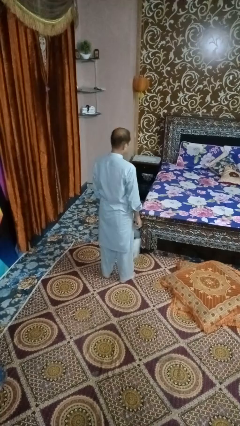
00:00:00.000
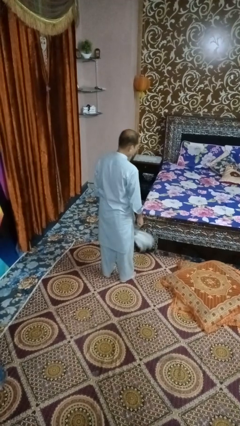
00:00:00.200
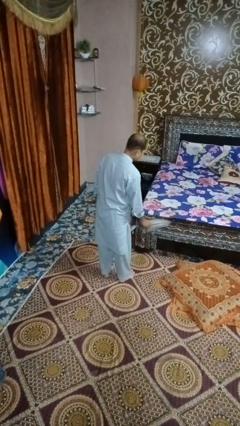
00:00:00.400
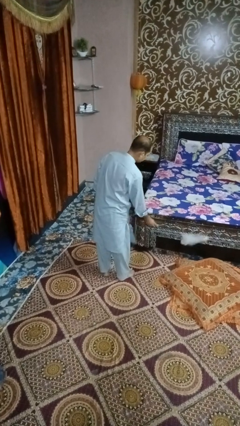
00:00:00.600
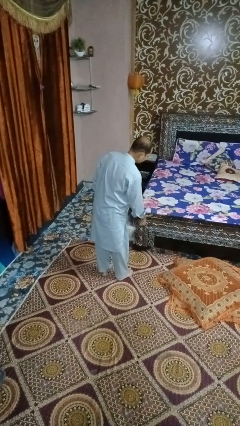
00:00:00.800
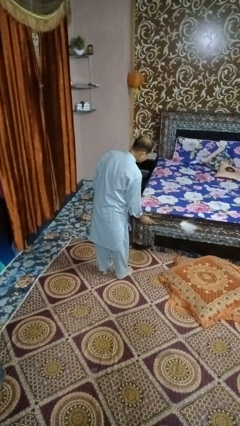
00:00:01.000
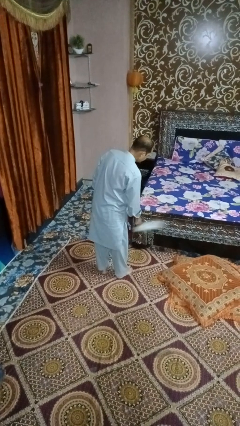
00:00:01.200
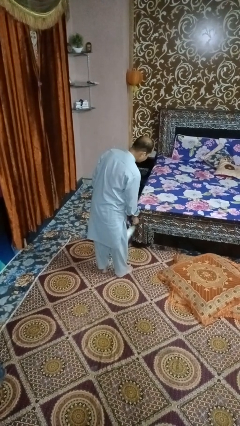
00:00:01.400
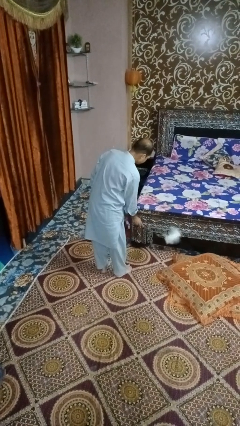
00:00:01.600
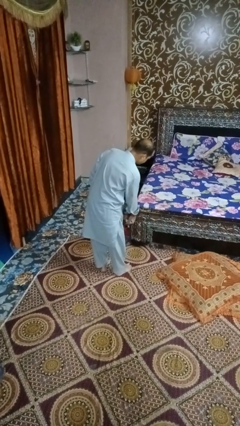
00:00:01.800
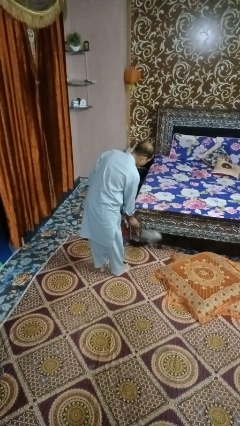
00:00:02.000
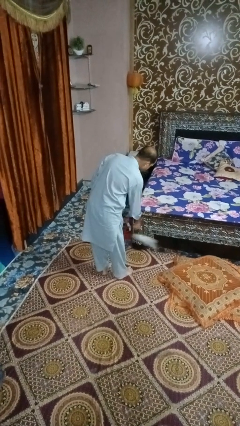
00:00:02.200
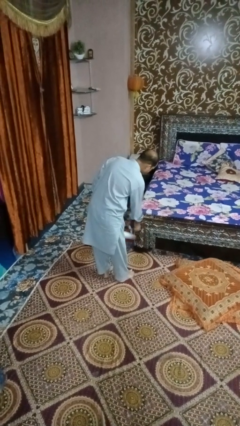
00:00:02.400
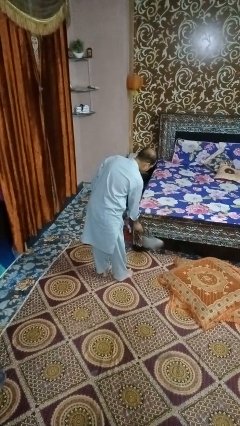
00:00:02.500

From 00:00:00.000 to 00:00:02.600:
person dusts furniture

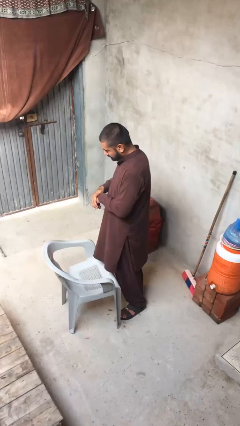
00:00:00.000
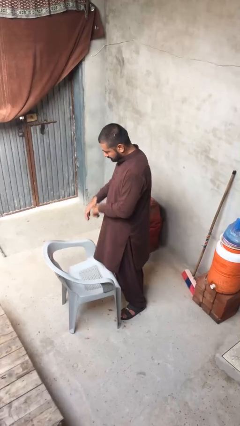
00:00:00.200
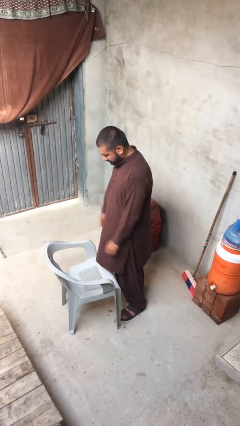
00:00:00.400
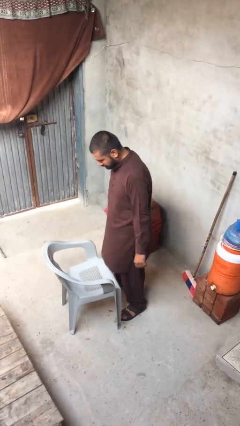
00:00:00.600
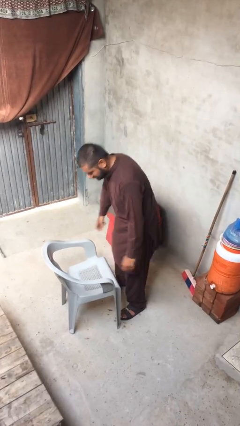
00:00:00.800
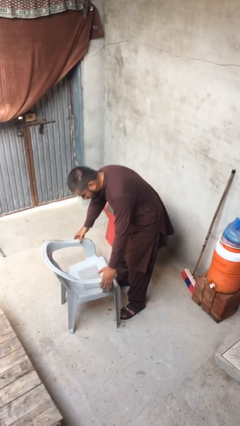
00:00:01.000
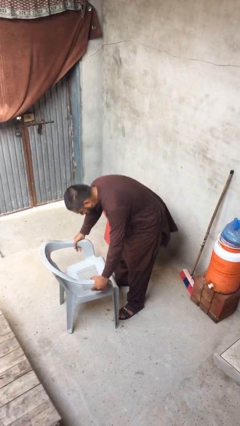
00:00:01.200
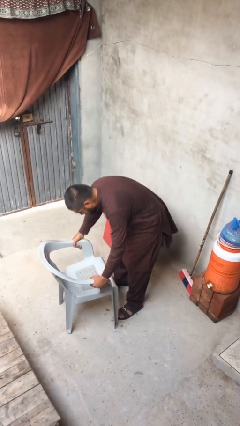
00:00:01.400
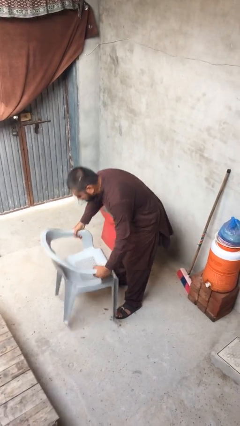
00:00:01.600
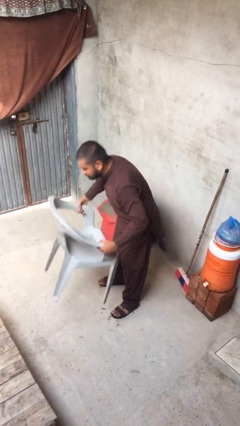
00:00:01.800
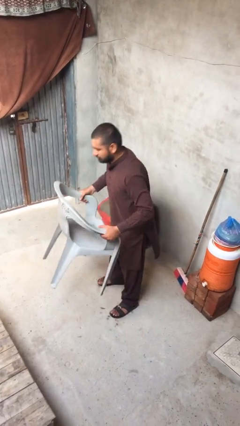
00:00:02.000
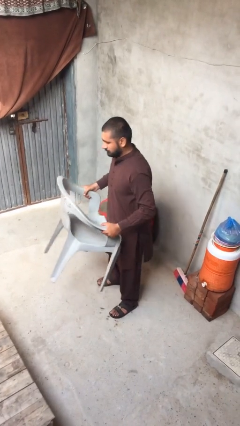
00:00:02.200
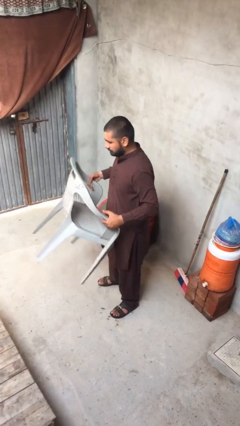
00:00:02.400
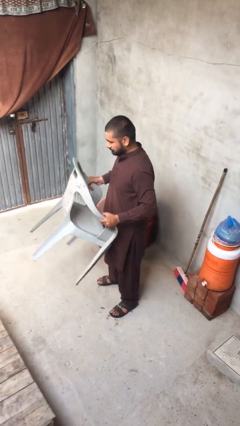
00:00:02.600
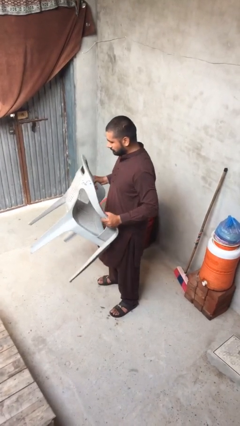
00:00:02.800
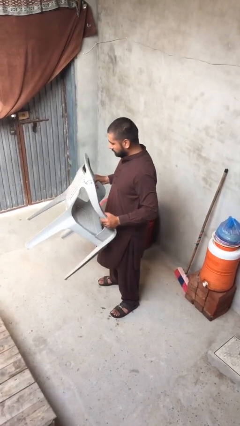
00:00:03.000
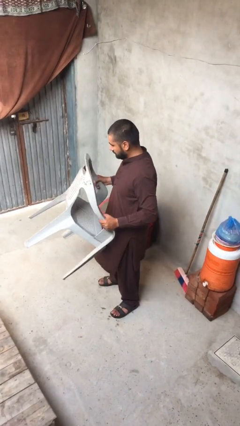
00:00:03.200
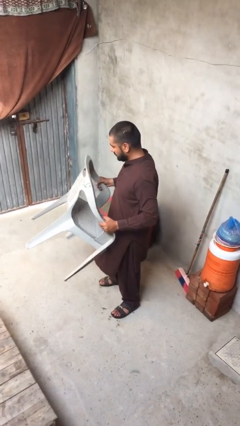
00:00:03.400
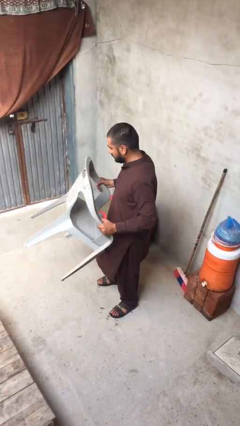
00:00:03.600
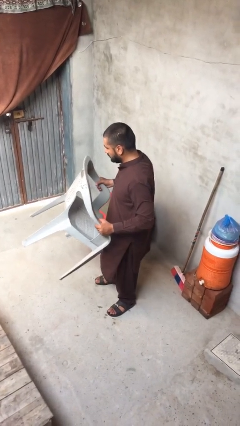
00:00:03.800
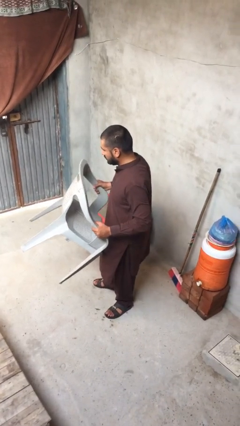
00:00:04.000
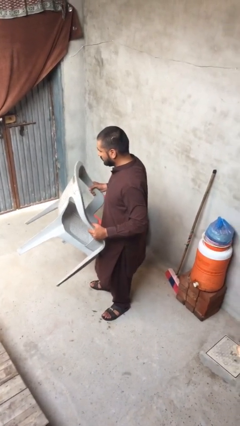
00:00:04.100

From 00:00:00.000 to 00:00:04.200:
person picks up object from floor

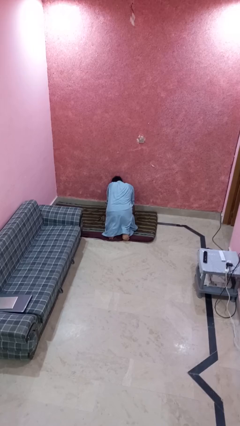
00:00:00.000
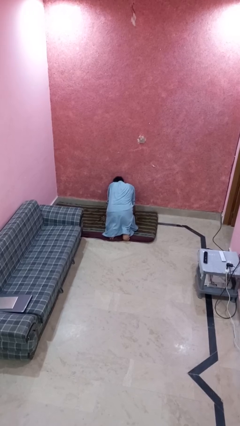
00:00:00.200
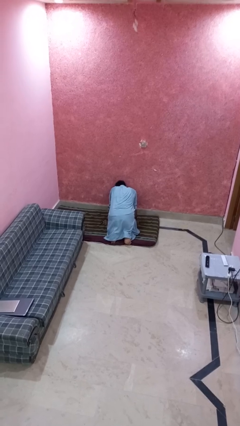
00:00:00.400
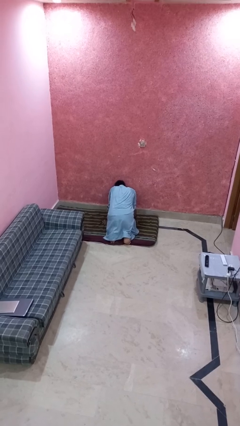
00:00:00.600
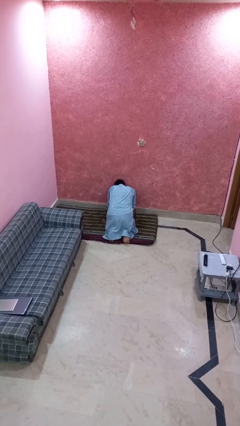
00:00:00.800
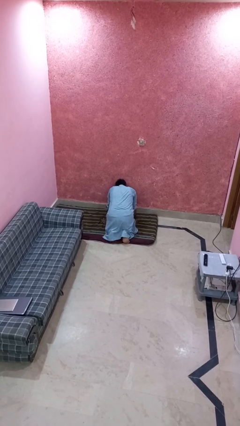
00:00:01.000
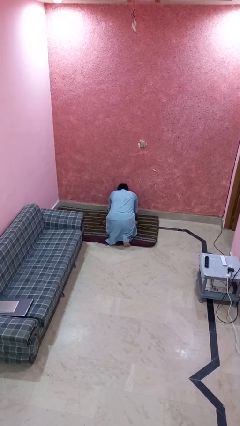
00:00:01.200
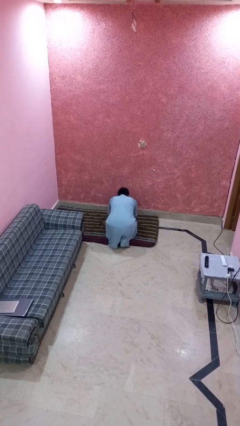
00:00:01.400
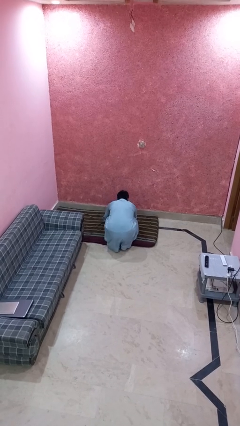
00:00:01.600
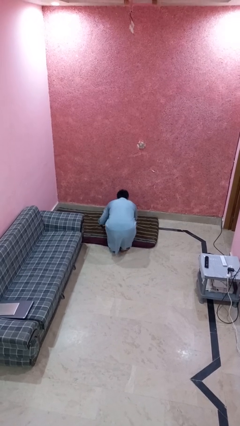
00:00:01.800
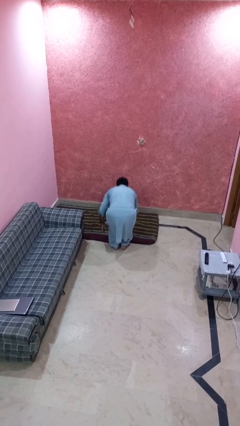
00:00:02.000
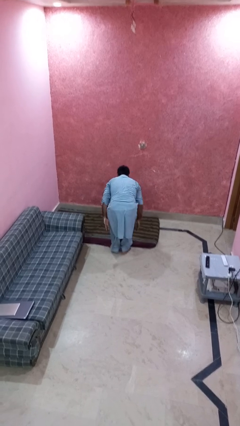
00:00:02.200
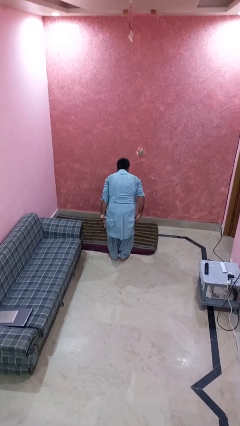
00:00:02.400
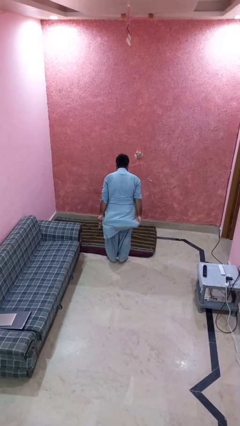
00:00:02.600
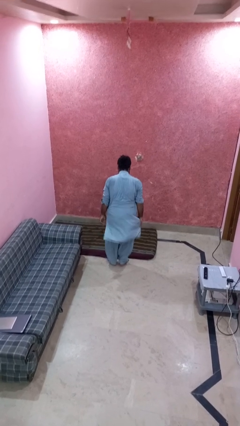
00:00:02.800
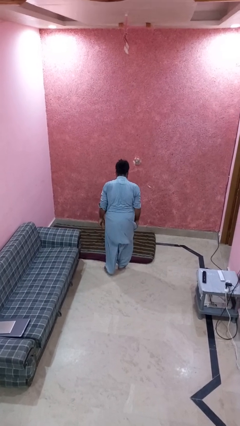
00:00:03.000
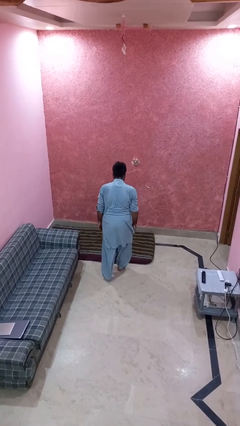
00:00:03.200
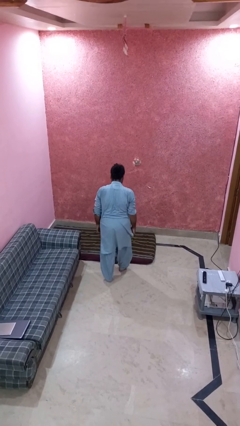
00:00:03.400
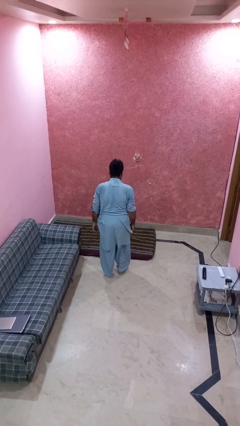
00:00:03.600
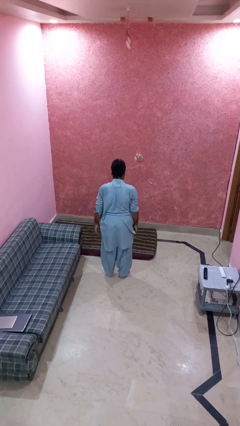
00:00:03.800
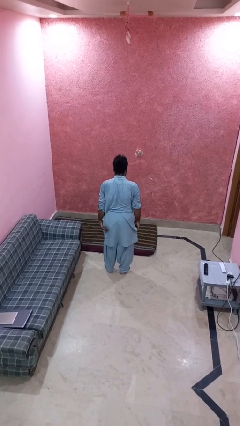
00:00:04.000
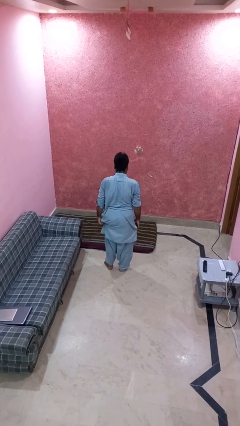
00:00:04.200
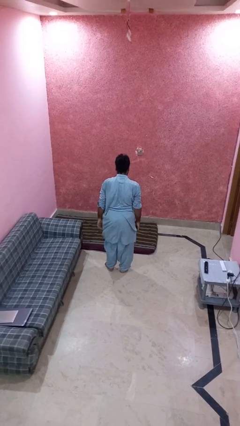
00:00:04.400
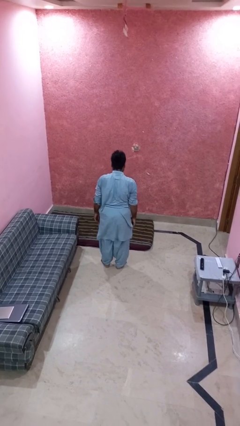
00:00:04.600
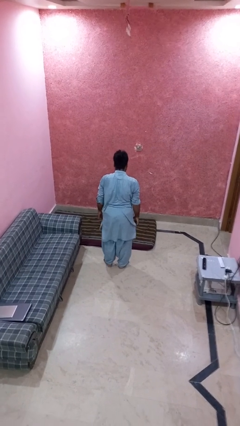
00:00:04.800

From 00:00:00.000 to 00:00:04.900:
person stands up from floor

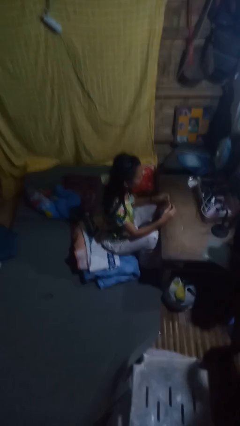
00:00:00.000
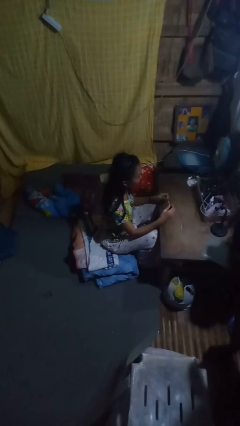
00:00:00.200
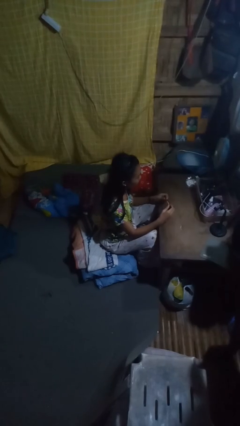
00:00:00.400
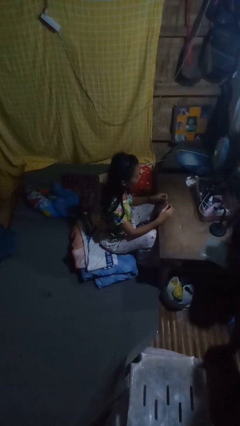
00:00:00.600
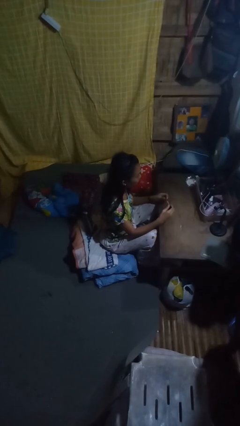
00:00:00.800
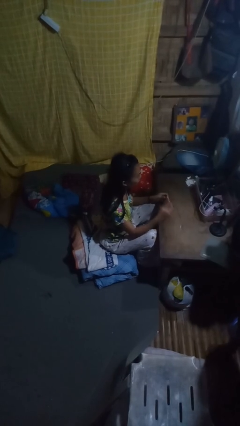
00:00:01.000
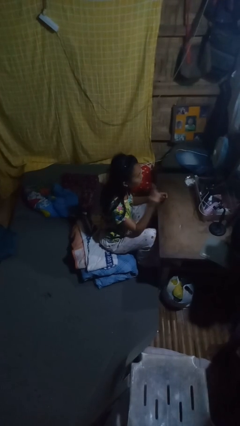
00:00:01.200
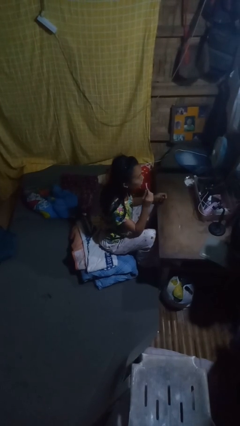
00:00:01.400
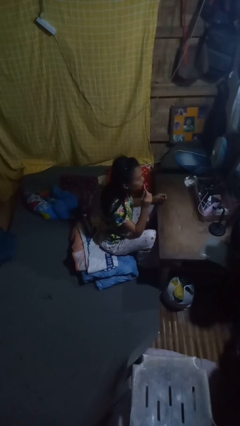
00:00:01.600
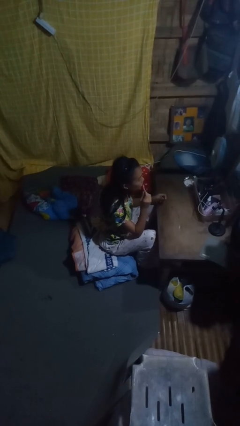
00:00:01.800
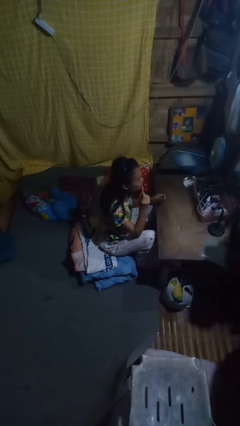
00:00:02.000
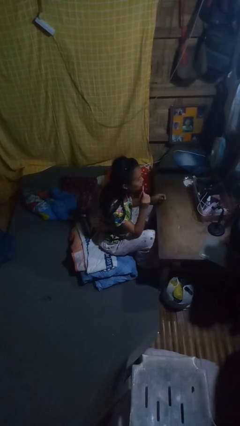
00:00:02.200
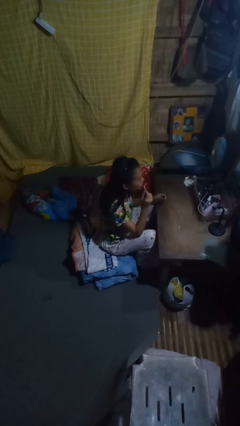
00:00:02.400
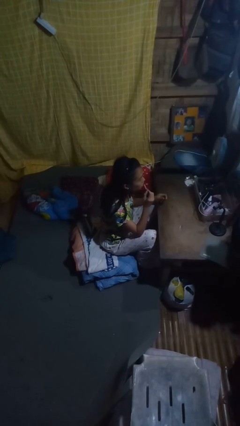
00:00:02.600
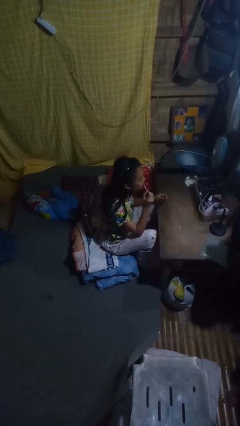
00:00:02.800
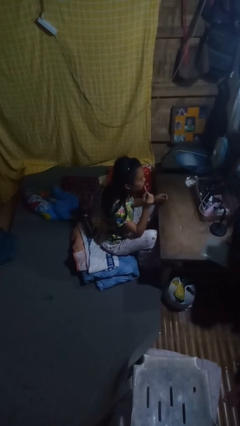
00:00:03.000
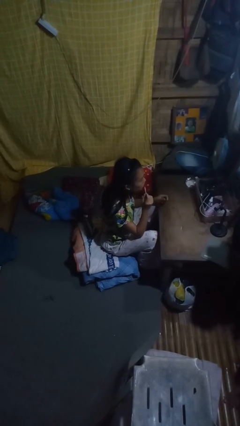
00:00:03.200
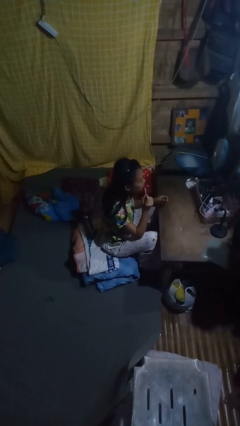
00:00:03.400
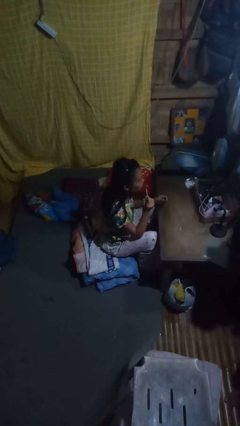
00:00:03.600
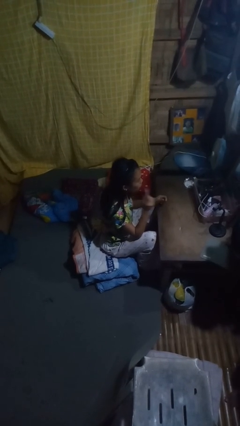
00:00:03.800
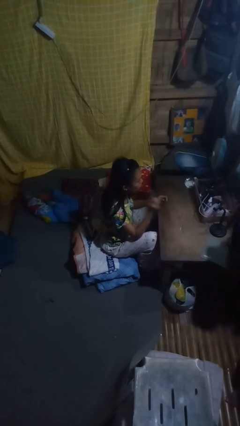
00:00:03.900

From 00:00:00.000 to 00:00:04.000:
person applies lip makeup

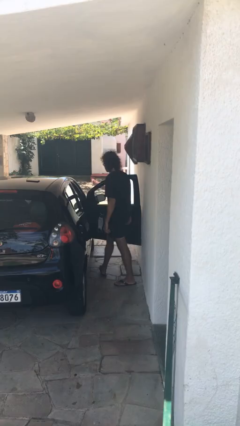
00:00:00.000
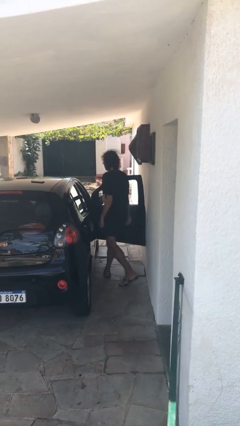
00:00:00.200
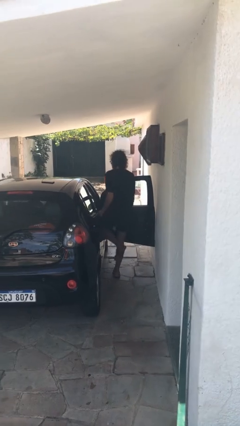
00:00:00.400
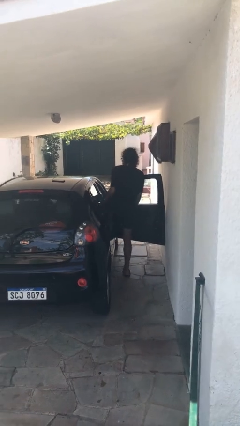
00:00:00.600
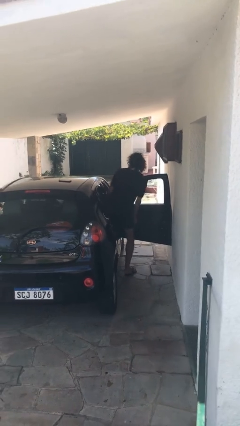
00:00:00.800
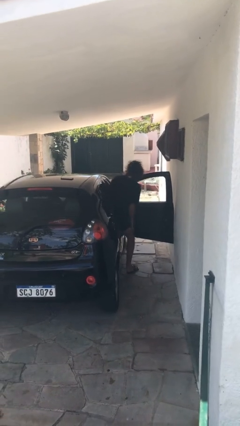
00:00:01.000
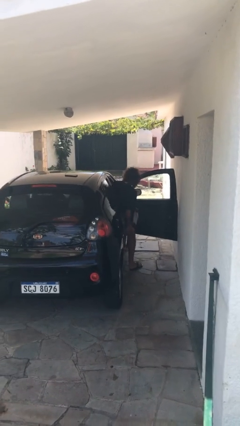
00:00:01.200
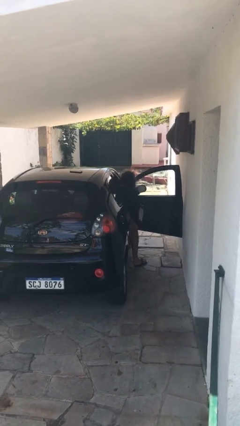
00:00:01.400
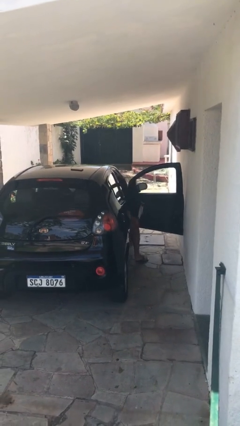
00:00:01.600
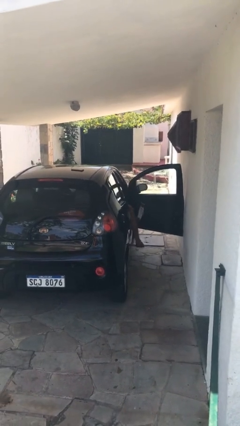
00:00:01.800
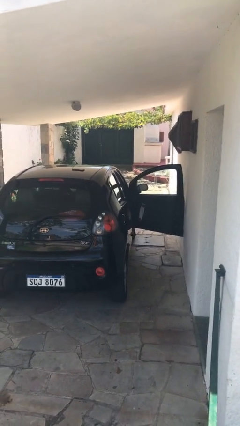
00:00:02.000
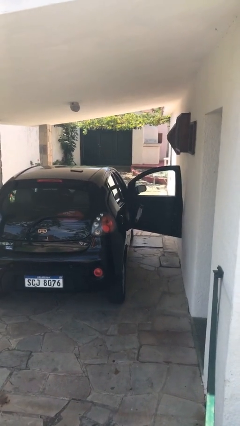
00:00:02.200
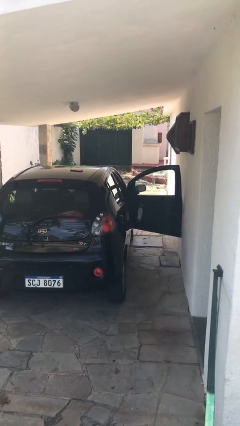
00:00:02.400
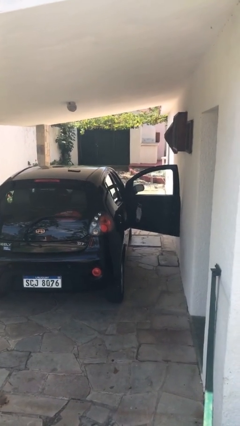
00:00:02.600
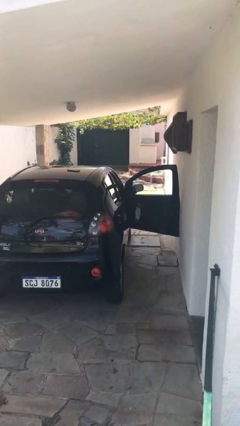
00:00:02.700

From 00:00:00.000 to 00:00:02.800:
person enters car
